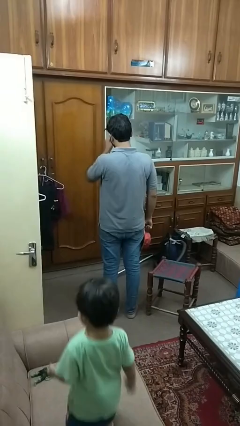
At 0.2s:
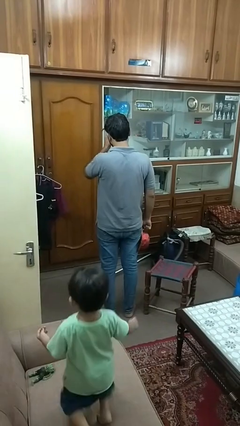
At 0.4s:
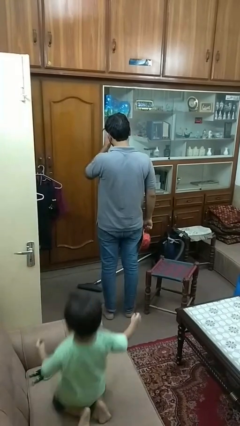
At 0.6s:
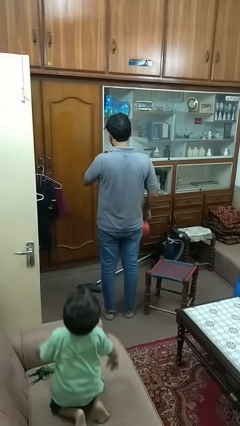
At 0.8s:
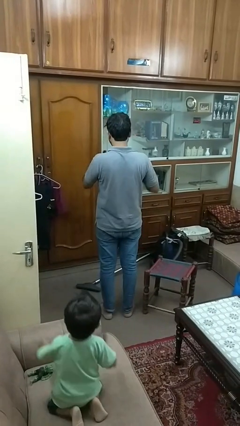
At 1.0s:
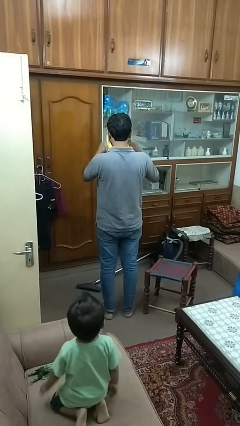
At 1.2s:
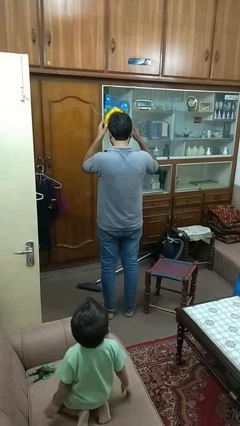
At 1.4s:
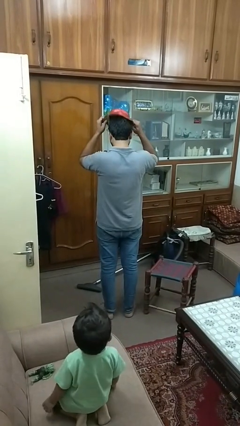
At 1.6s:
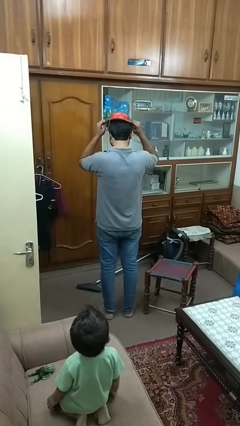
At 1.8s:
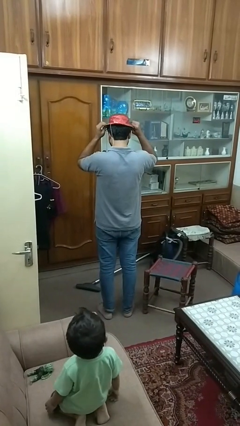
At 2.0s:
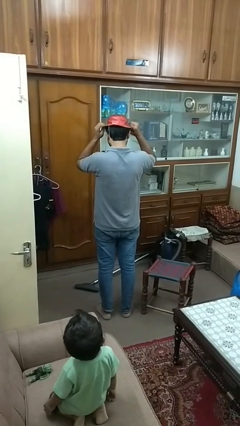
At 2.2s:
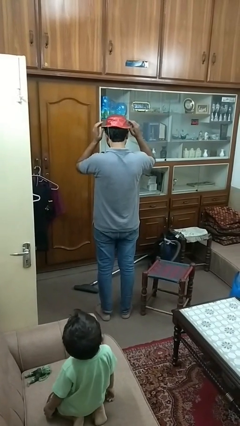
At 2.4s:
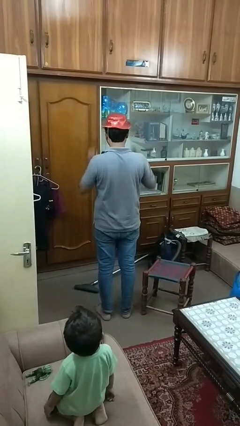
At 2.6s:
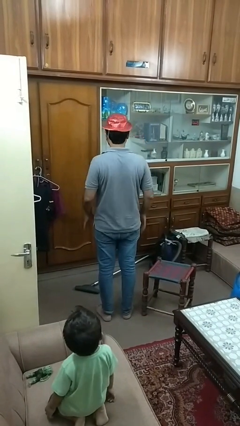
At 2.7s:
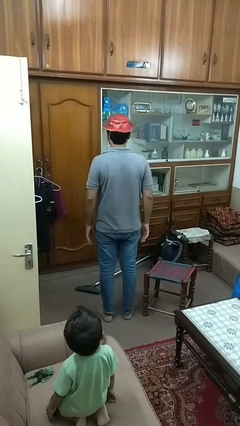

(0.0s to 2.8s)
person puts on hat

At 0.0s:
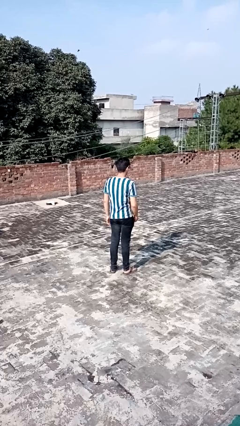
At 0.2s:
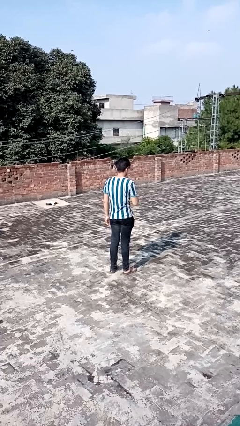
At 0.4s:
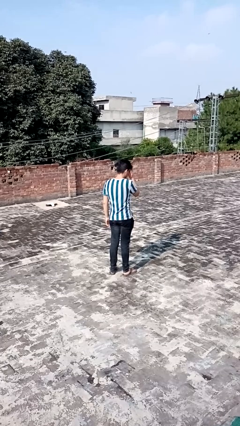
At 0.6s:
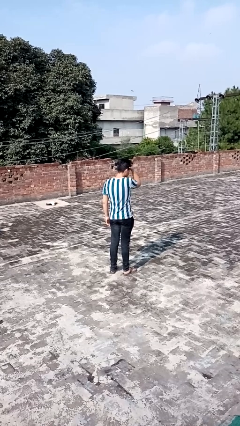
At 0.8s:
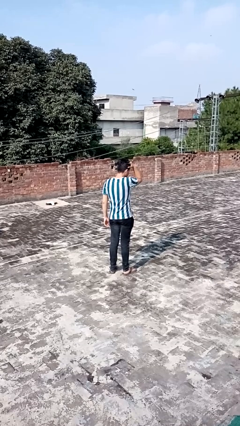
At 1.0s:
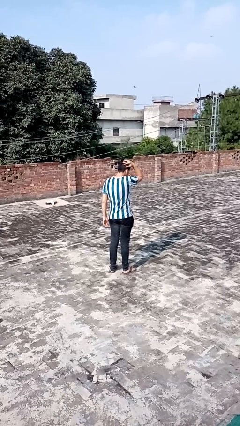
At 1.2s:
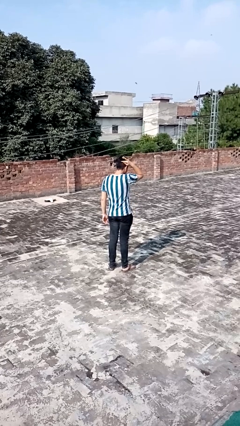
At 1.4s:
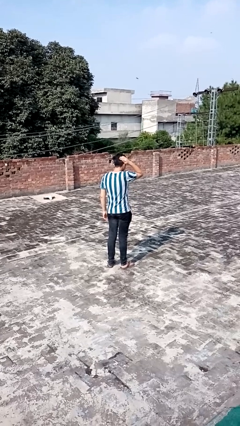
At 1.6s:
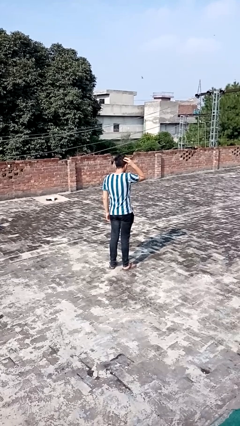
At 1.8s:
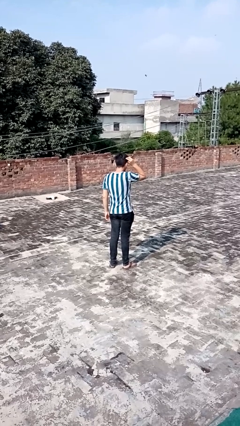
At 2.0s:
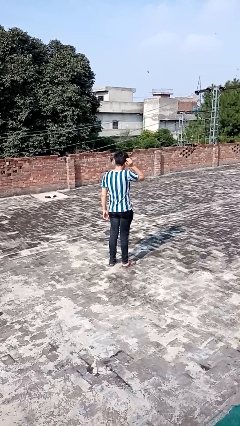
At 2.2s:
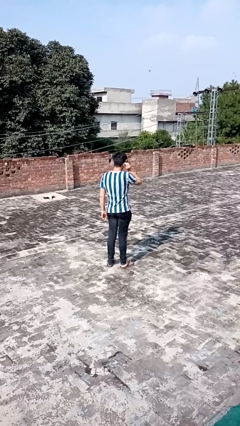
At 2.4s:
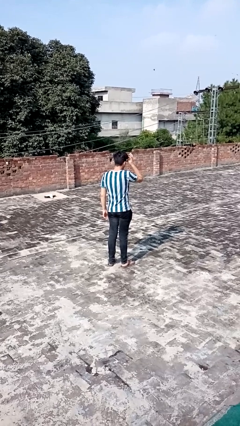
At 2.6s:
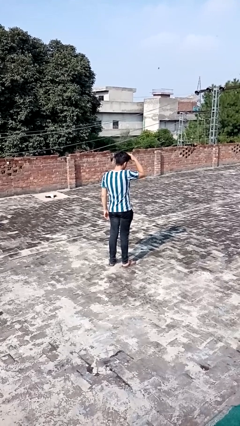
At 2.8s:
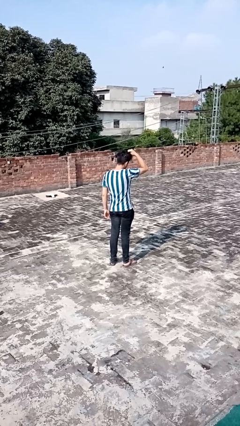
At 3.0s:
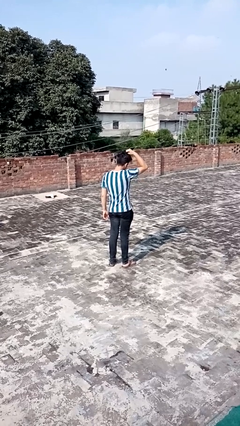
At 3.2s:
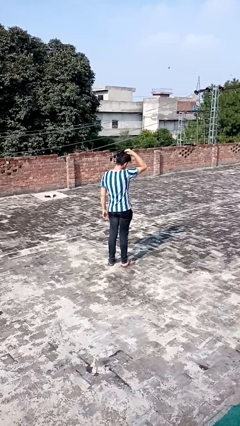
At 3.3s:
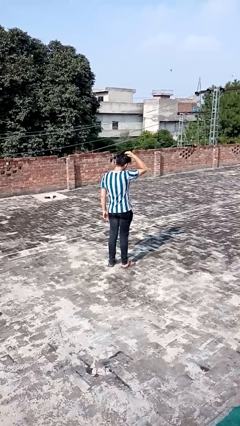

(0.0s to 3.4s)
person strokes hair

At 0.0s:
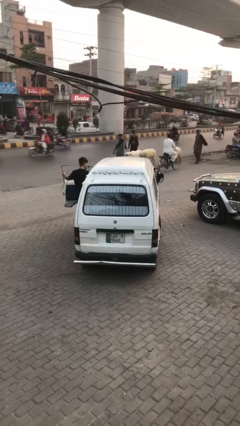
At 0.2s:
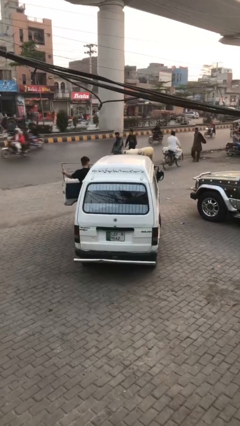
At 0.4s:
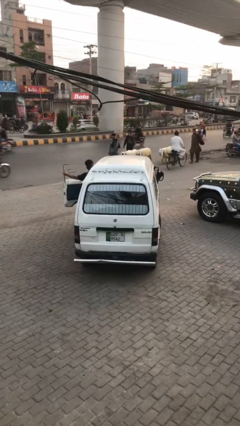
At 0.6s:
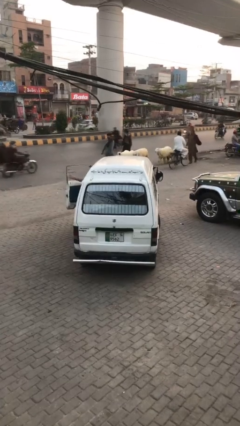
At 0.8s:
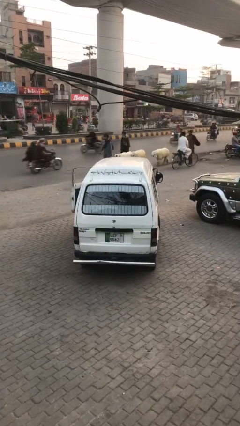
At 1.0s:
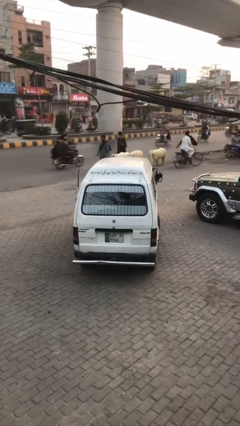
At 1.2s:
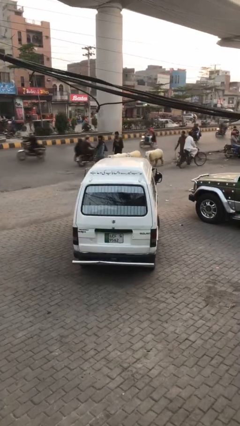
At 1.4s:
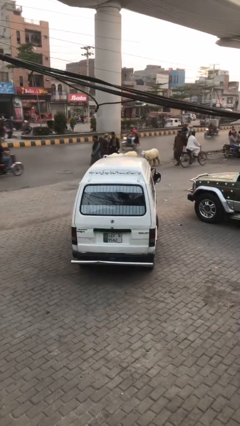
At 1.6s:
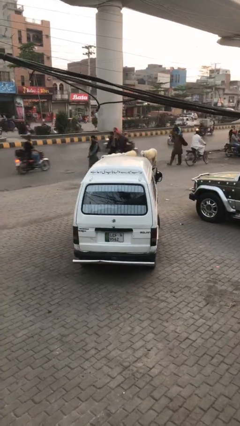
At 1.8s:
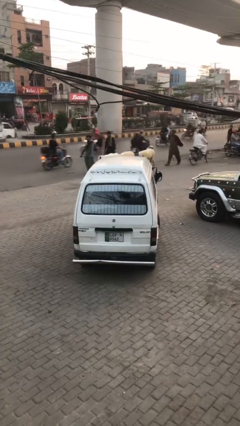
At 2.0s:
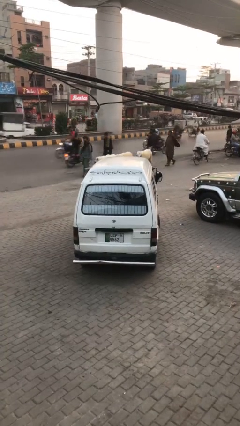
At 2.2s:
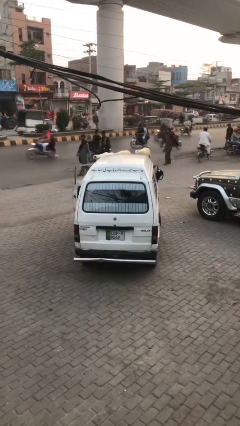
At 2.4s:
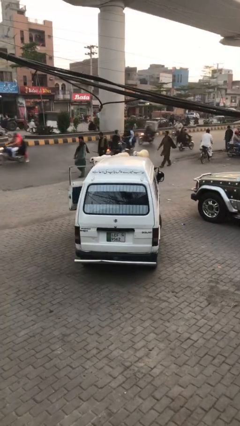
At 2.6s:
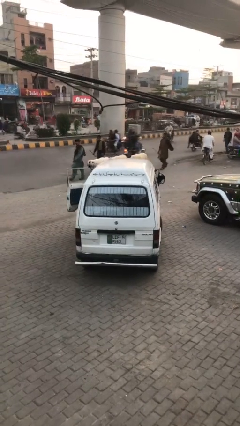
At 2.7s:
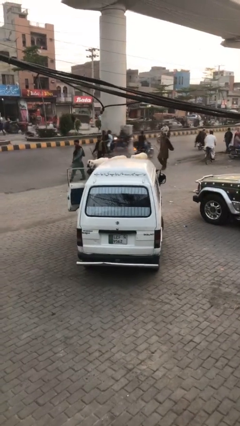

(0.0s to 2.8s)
car picks up person

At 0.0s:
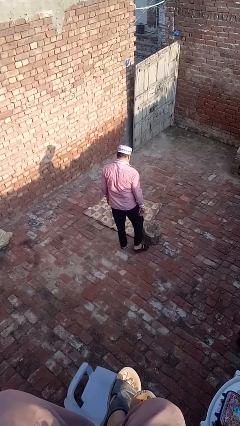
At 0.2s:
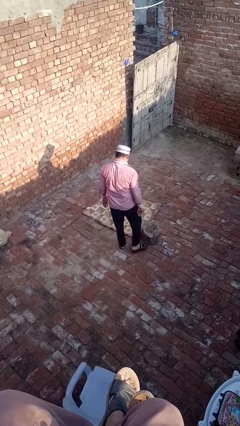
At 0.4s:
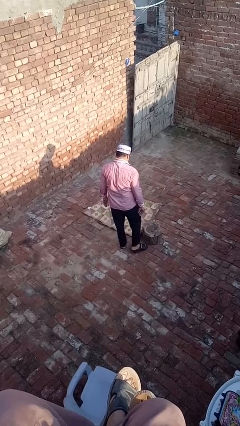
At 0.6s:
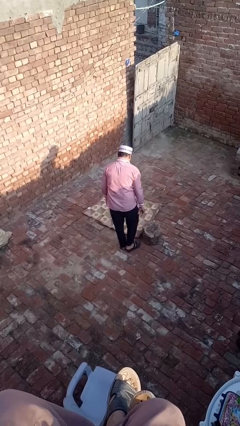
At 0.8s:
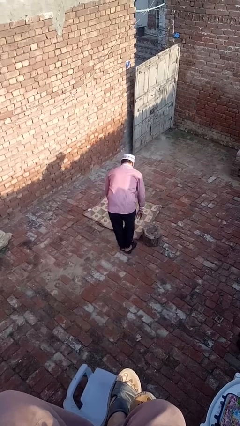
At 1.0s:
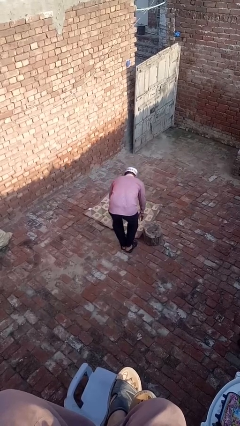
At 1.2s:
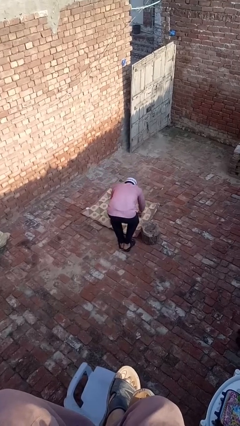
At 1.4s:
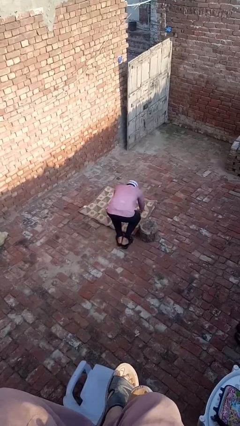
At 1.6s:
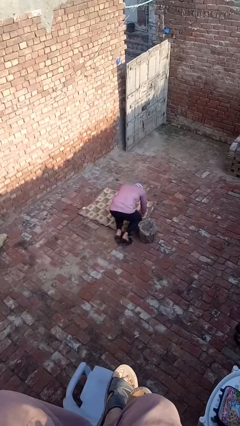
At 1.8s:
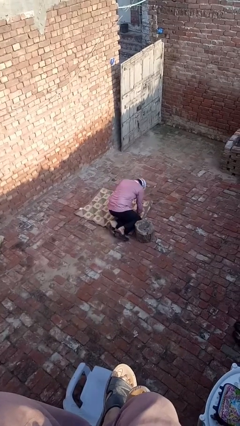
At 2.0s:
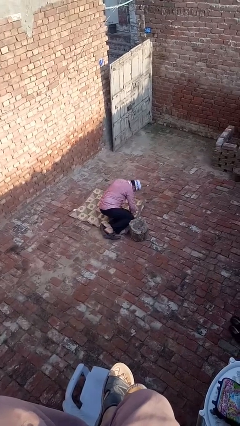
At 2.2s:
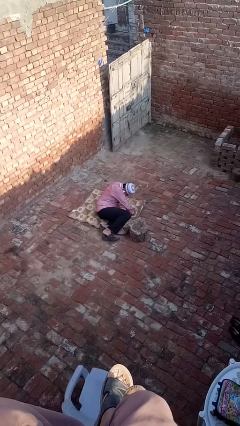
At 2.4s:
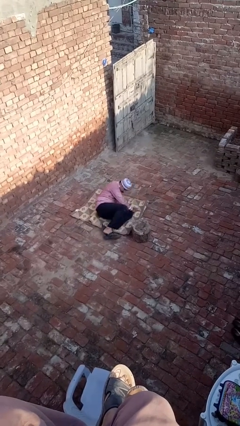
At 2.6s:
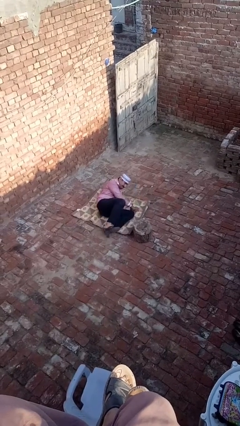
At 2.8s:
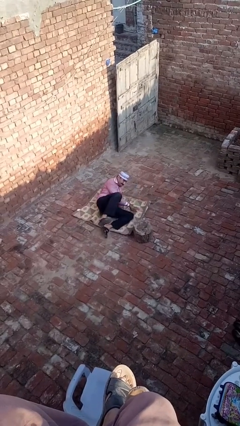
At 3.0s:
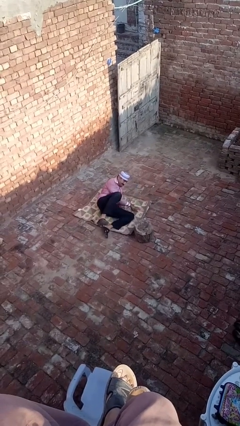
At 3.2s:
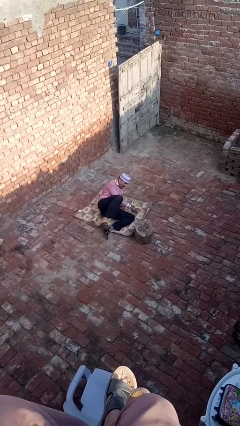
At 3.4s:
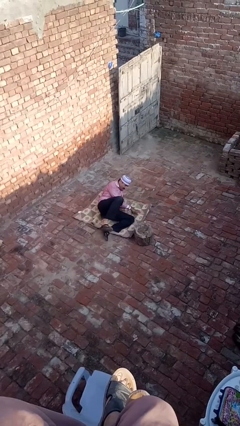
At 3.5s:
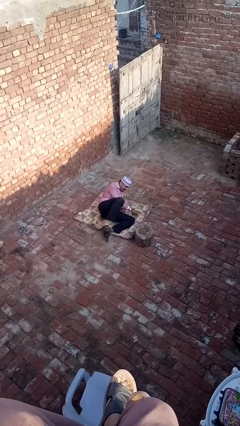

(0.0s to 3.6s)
person lies down on floor

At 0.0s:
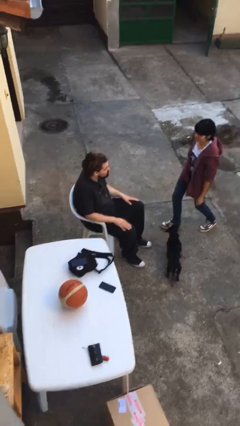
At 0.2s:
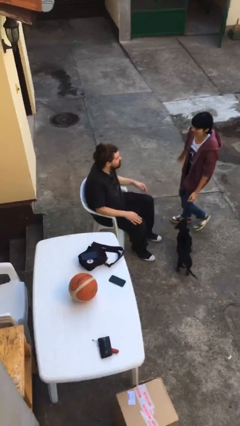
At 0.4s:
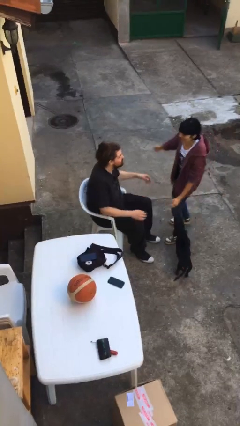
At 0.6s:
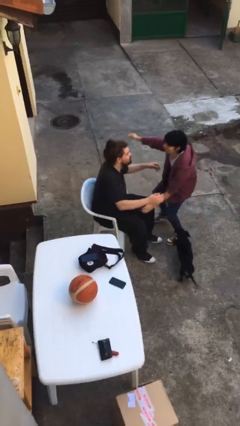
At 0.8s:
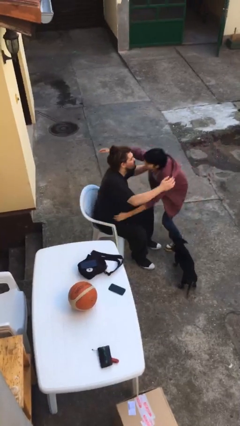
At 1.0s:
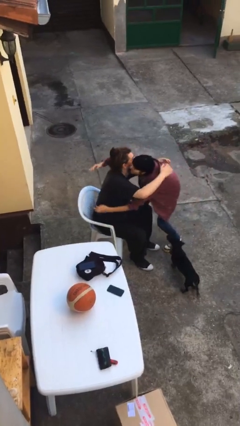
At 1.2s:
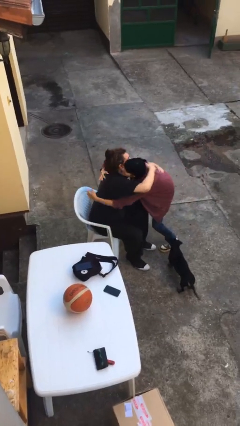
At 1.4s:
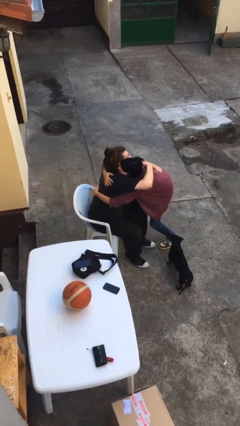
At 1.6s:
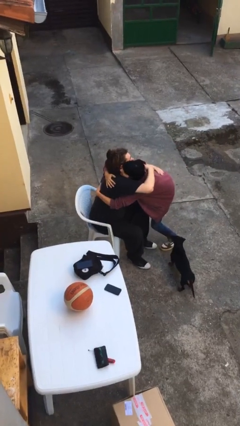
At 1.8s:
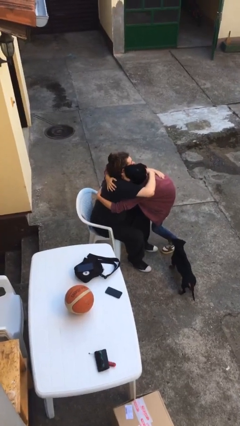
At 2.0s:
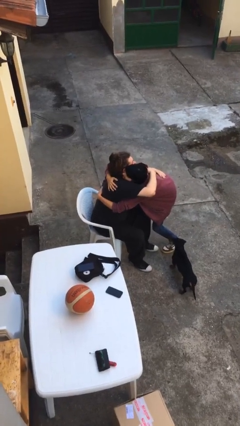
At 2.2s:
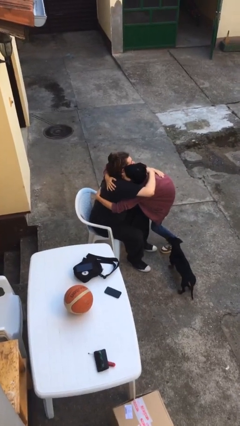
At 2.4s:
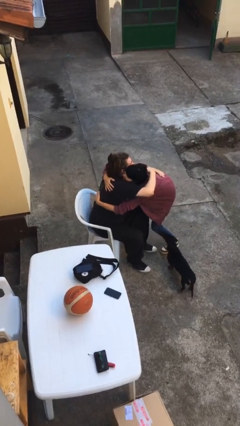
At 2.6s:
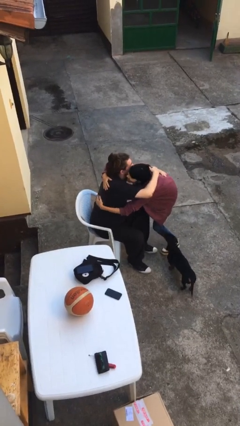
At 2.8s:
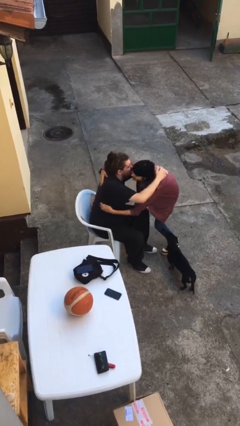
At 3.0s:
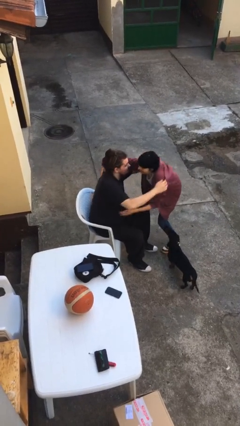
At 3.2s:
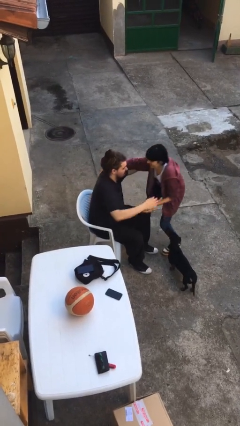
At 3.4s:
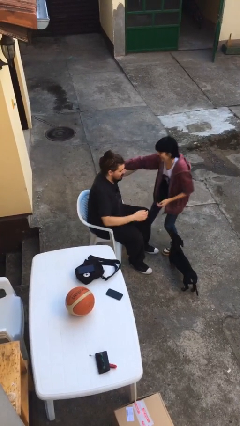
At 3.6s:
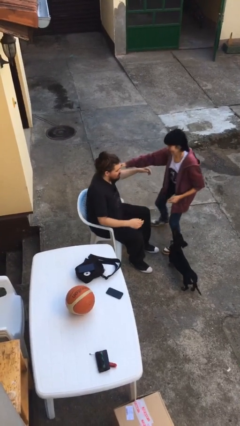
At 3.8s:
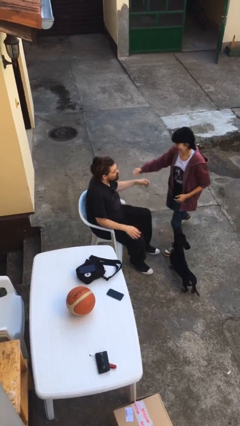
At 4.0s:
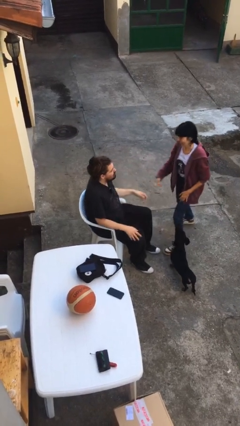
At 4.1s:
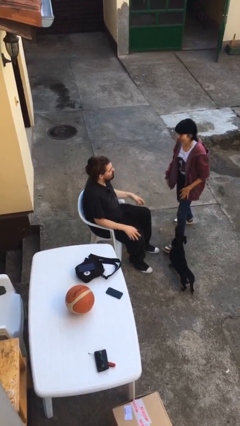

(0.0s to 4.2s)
person embraces person

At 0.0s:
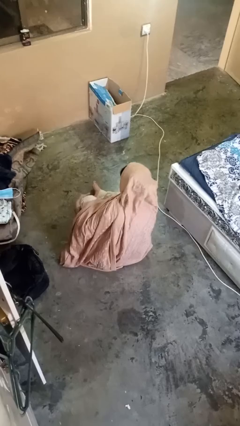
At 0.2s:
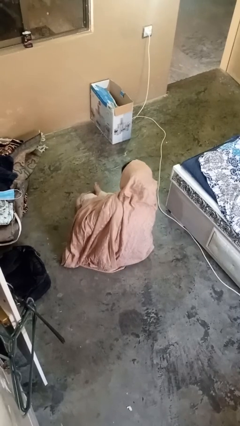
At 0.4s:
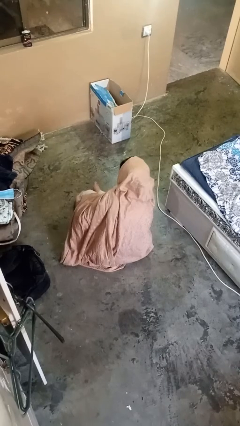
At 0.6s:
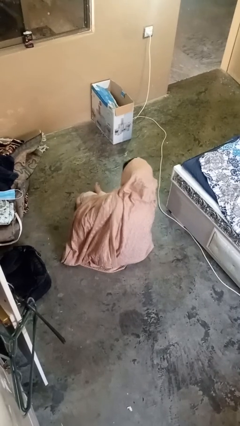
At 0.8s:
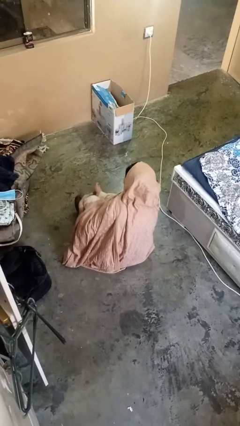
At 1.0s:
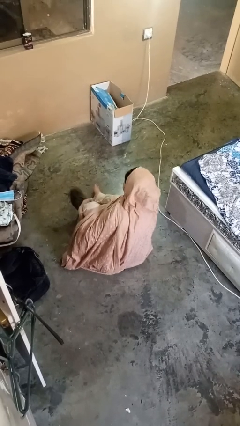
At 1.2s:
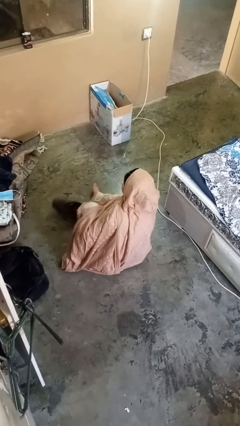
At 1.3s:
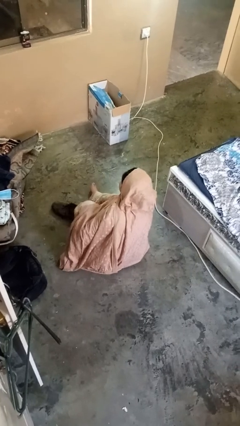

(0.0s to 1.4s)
person takes off shoes
